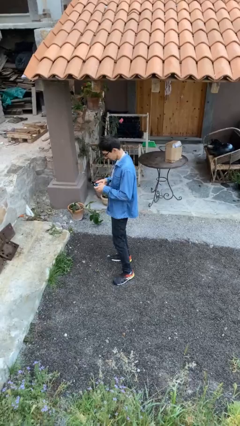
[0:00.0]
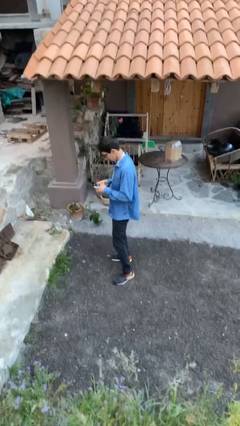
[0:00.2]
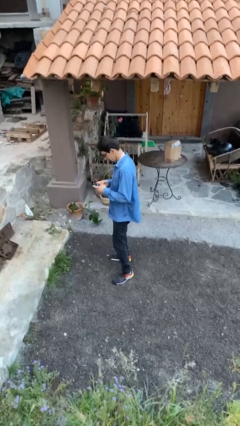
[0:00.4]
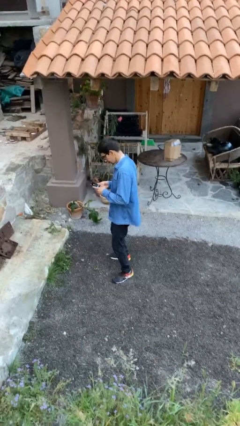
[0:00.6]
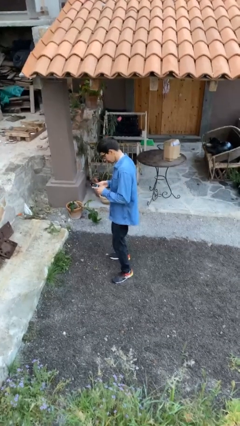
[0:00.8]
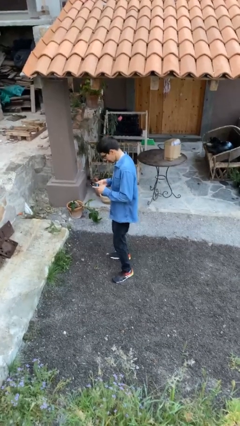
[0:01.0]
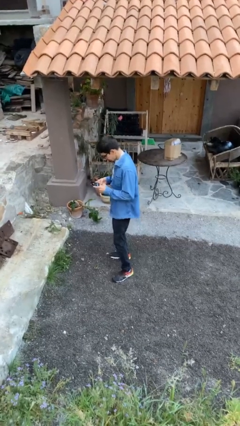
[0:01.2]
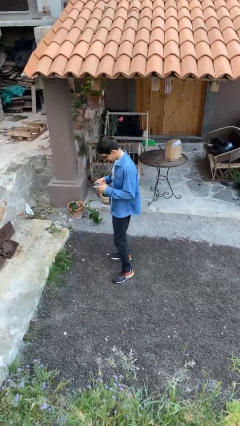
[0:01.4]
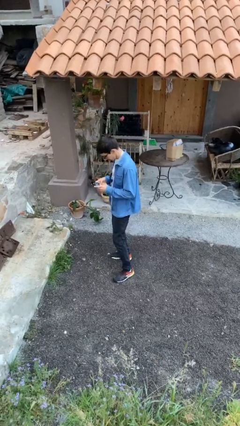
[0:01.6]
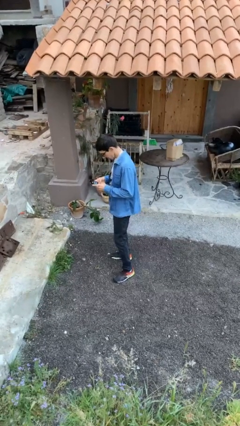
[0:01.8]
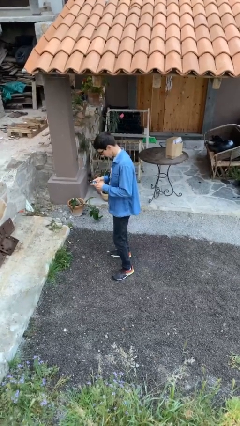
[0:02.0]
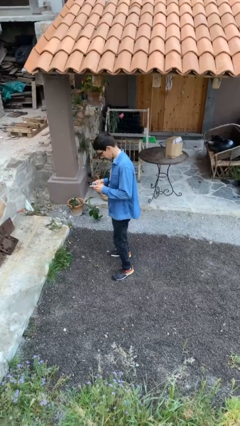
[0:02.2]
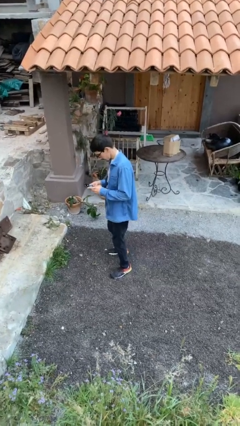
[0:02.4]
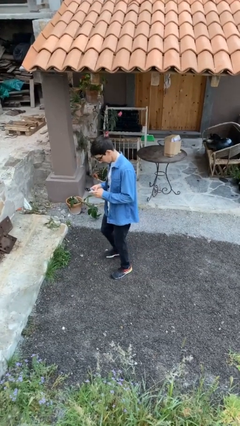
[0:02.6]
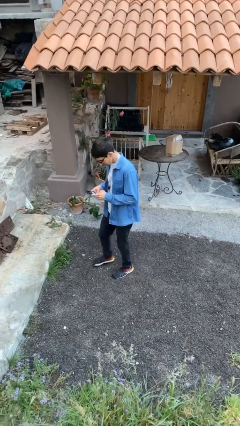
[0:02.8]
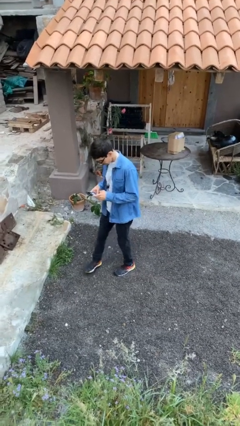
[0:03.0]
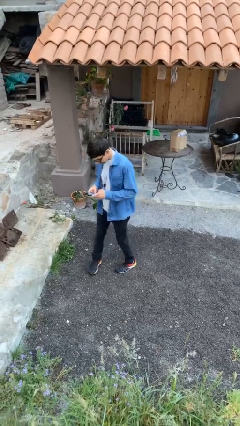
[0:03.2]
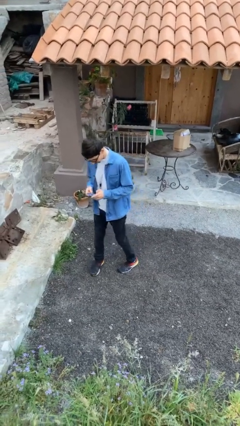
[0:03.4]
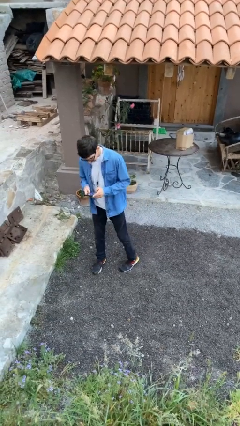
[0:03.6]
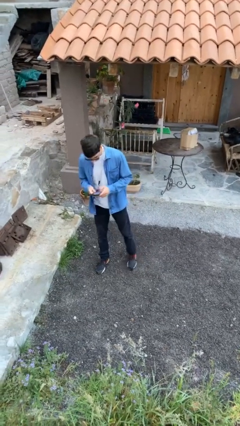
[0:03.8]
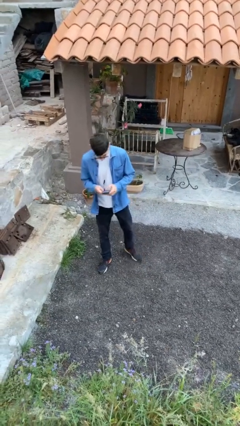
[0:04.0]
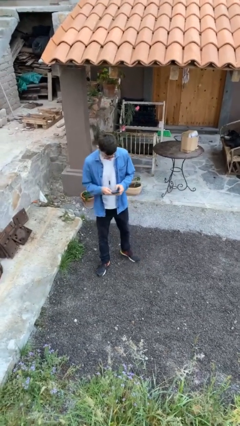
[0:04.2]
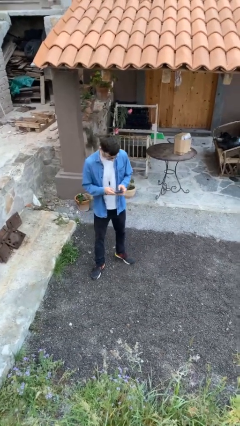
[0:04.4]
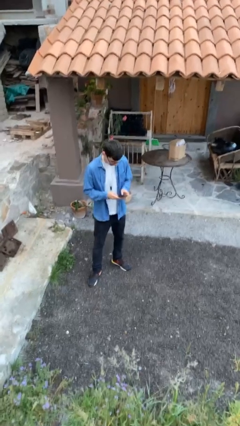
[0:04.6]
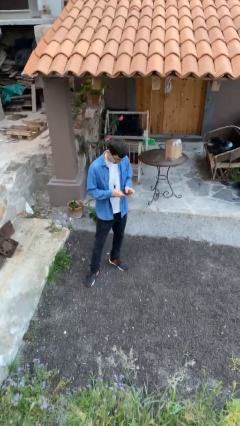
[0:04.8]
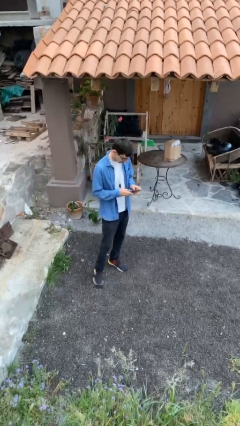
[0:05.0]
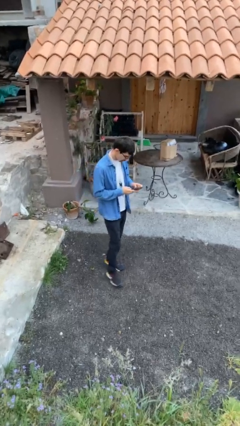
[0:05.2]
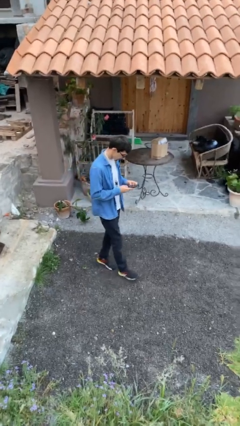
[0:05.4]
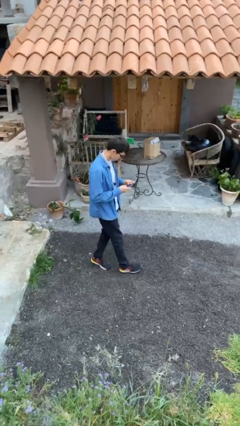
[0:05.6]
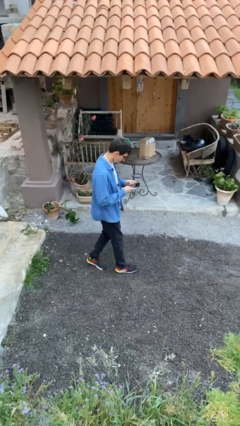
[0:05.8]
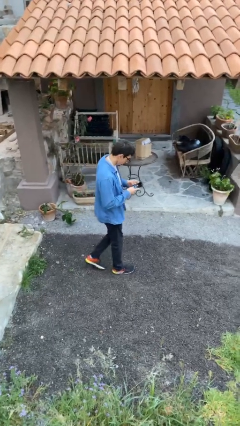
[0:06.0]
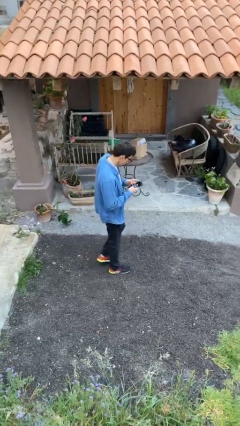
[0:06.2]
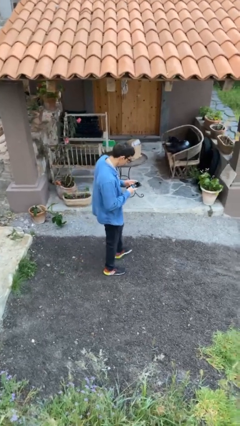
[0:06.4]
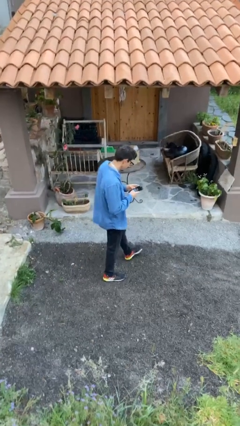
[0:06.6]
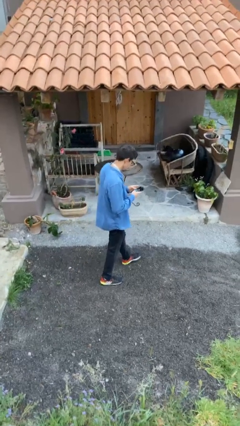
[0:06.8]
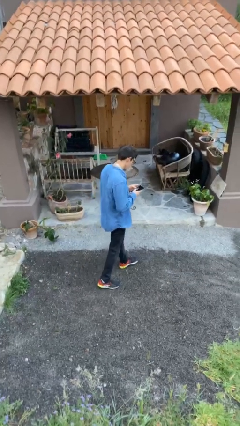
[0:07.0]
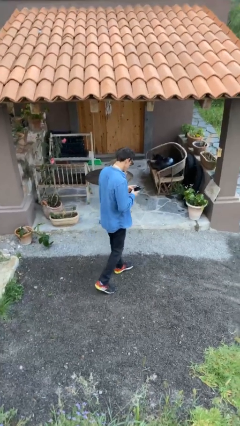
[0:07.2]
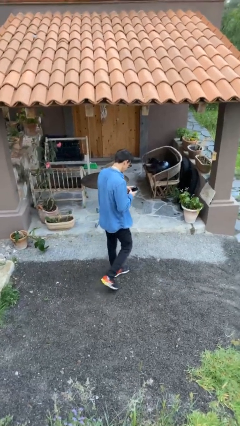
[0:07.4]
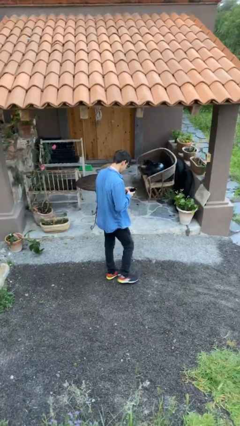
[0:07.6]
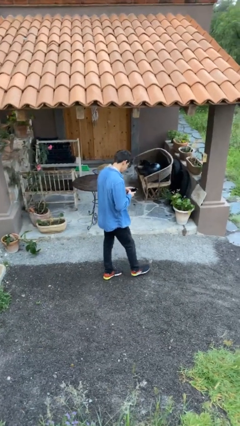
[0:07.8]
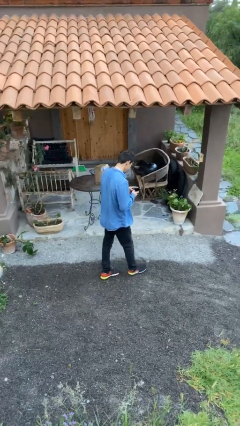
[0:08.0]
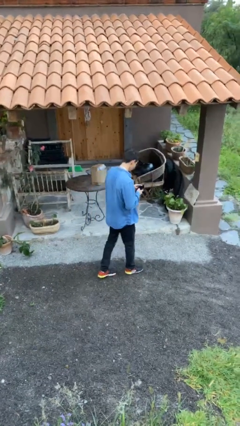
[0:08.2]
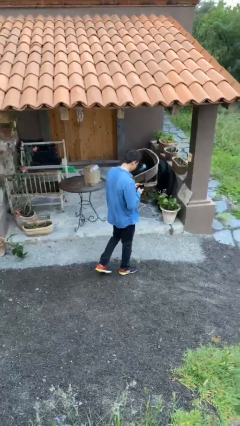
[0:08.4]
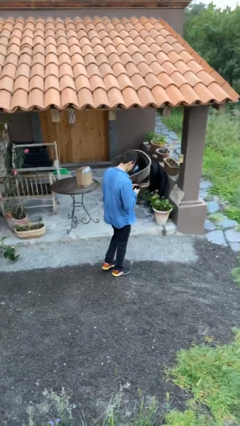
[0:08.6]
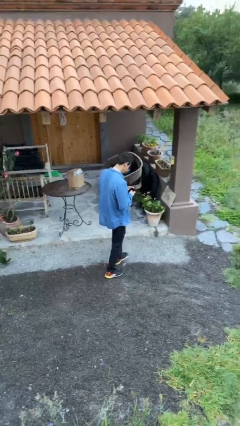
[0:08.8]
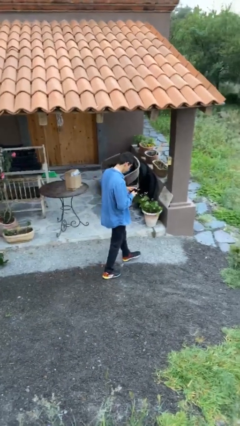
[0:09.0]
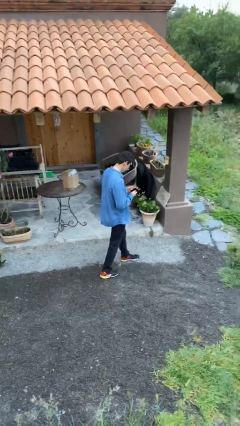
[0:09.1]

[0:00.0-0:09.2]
person texts on phone

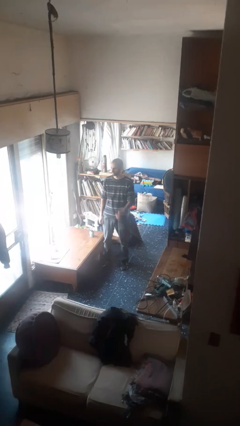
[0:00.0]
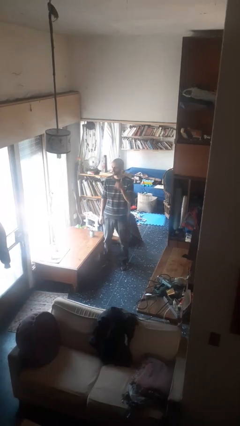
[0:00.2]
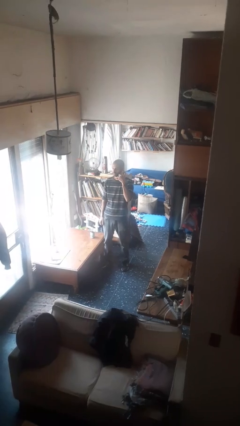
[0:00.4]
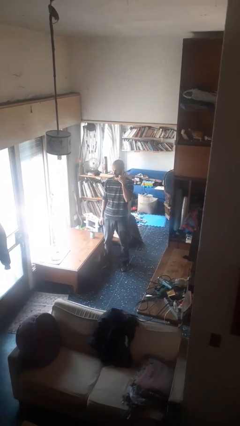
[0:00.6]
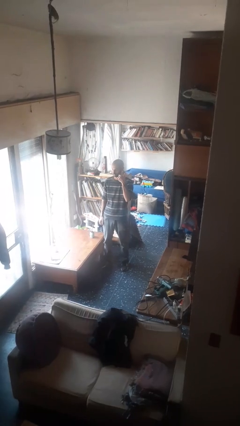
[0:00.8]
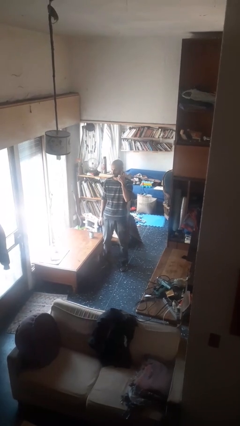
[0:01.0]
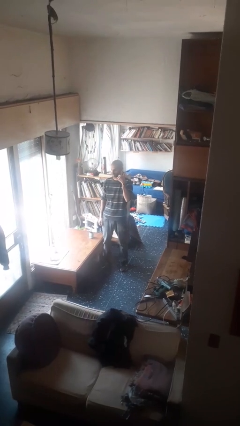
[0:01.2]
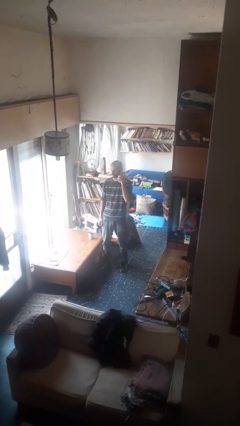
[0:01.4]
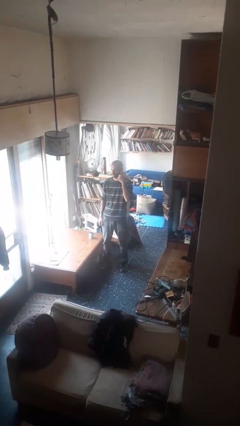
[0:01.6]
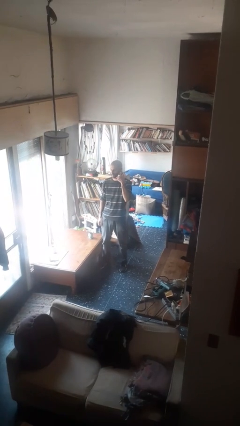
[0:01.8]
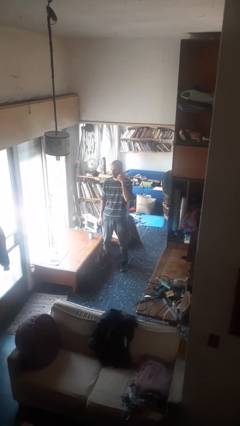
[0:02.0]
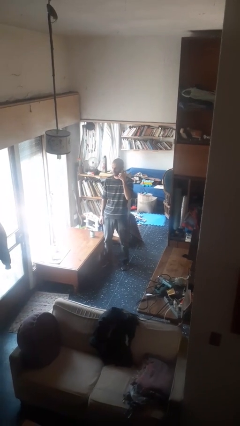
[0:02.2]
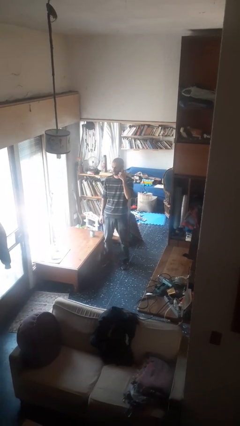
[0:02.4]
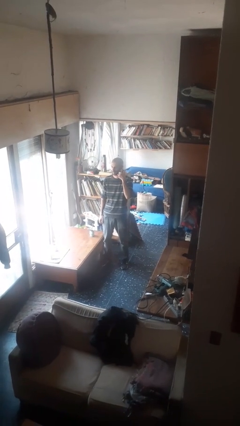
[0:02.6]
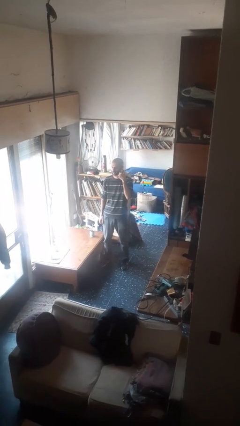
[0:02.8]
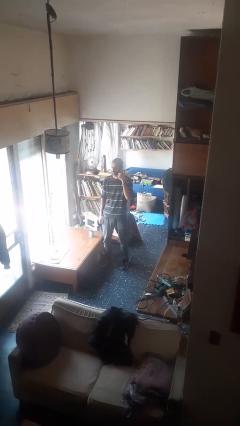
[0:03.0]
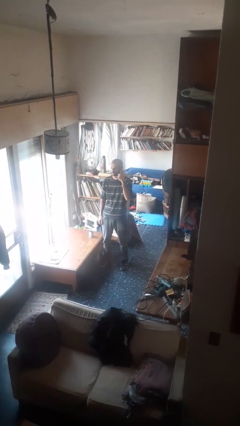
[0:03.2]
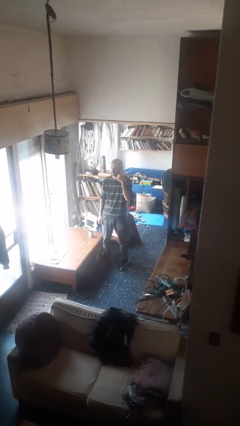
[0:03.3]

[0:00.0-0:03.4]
person gestures call me

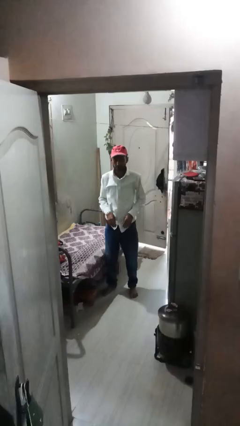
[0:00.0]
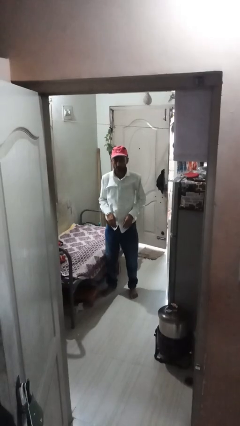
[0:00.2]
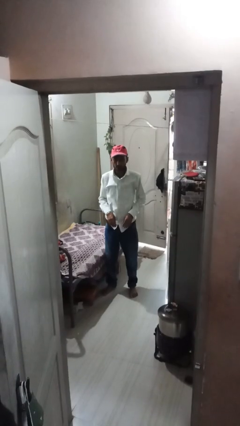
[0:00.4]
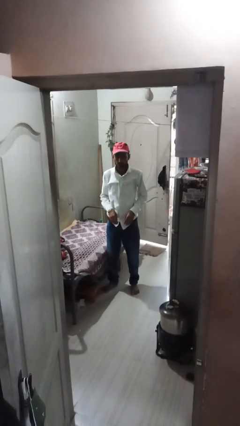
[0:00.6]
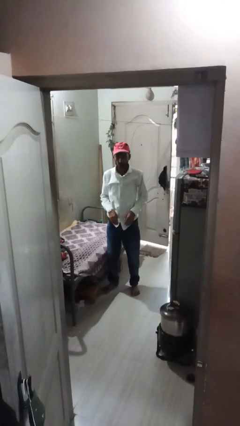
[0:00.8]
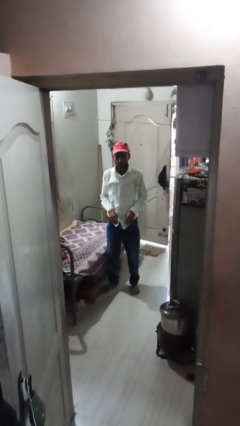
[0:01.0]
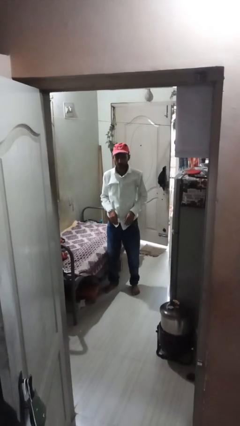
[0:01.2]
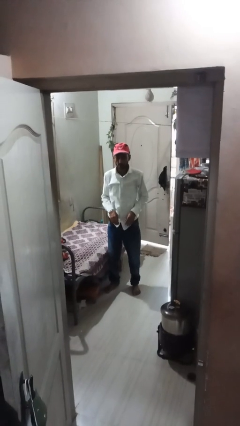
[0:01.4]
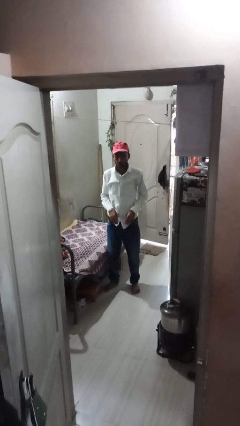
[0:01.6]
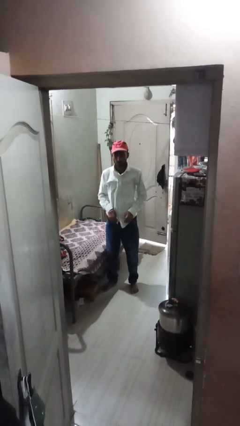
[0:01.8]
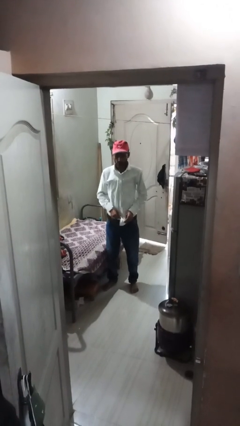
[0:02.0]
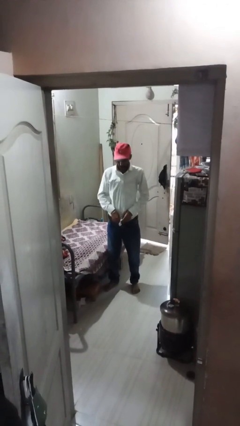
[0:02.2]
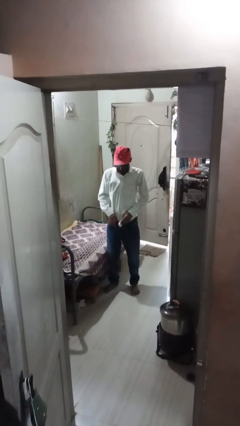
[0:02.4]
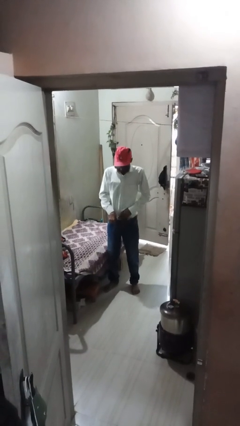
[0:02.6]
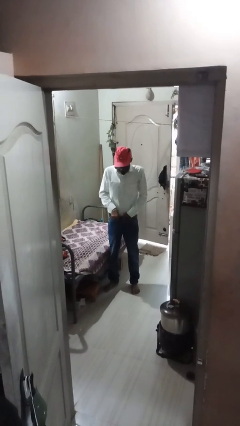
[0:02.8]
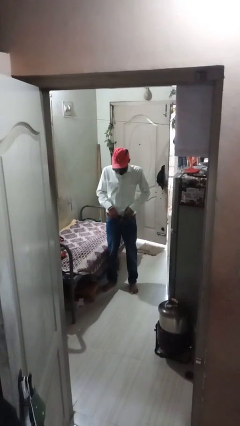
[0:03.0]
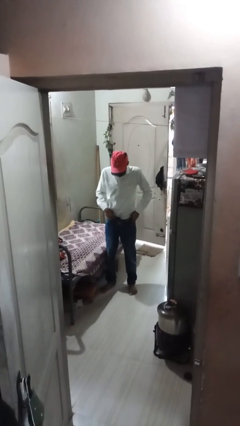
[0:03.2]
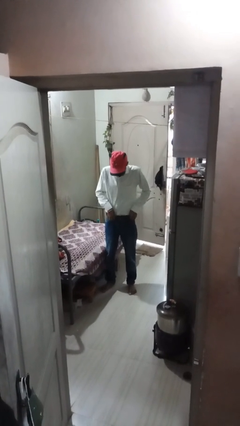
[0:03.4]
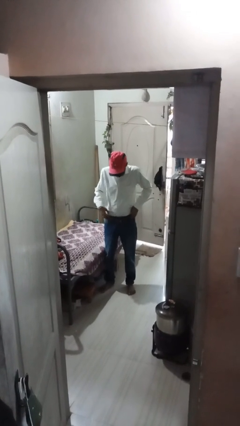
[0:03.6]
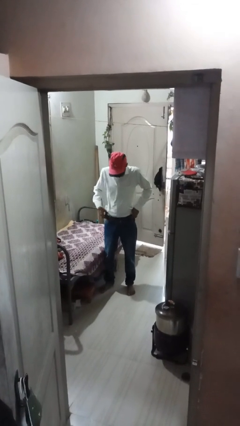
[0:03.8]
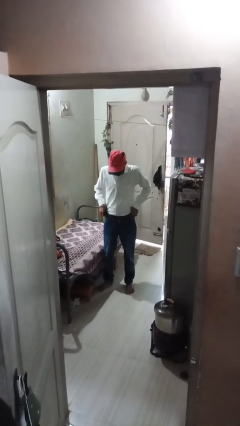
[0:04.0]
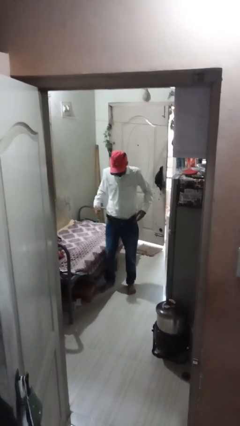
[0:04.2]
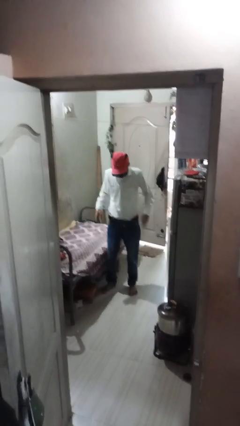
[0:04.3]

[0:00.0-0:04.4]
person tucks in shirt

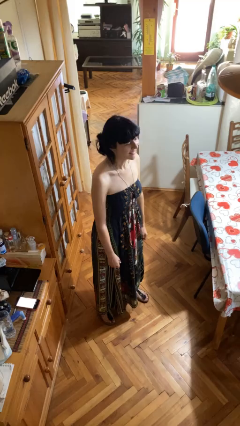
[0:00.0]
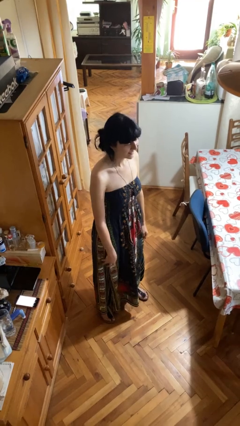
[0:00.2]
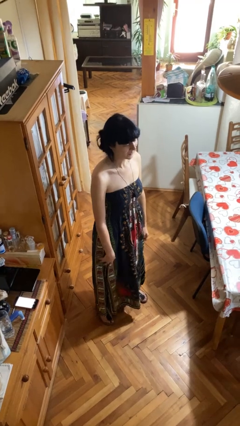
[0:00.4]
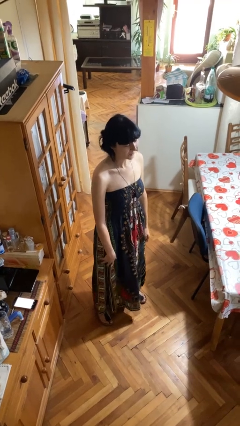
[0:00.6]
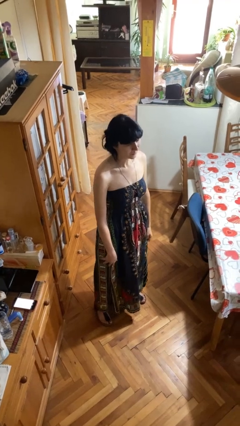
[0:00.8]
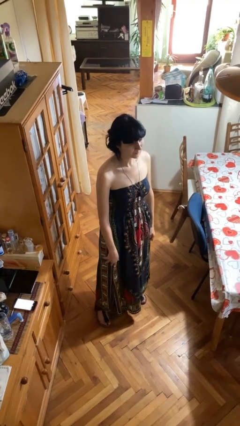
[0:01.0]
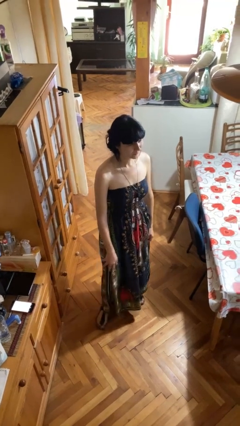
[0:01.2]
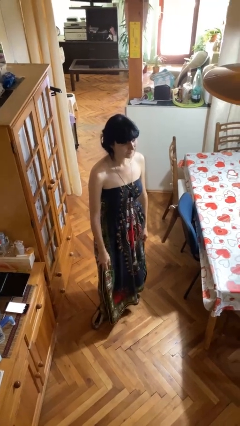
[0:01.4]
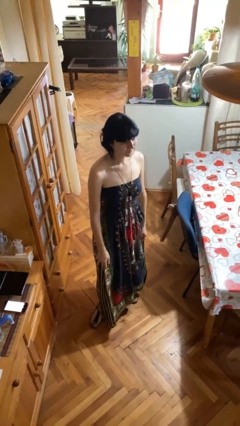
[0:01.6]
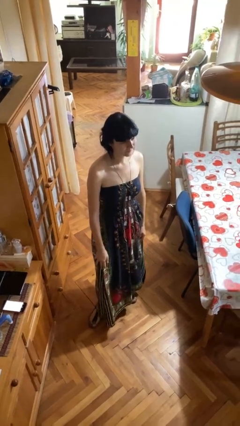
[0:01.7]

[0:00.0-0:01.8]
person nods head
